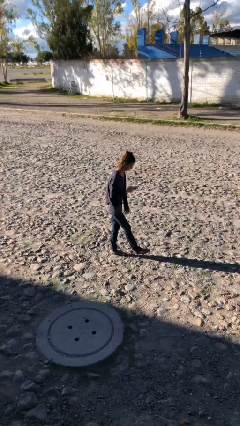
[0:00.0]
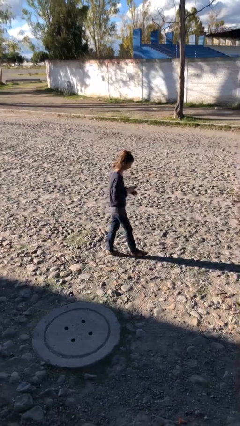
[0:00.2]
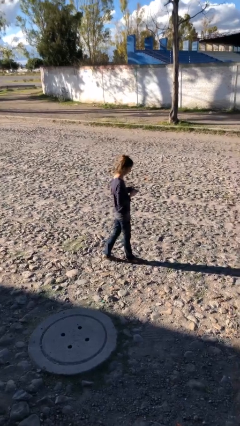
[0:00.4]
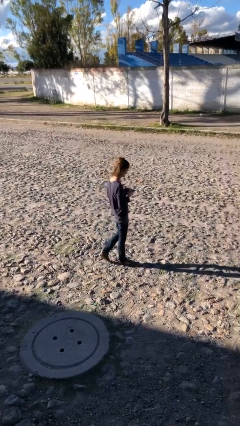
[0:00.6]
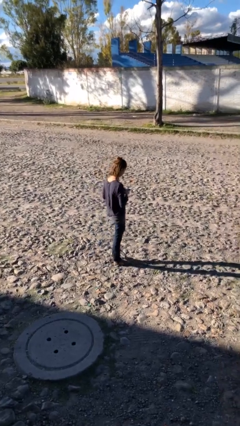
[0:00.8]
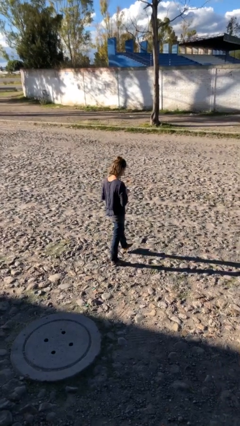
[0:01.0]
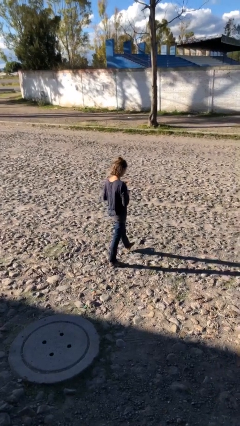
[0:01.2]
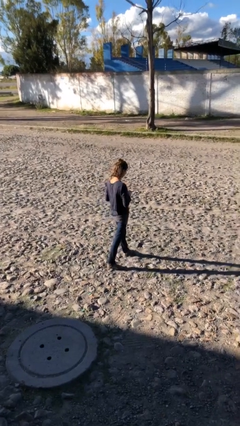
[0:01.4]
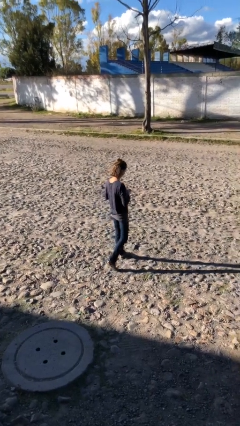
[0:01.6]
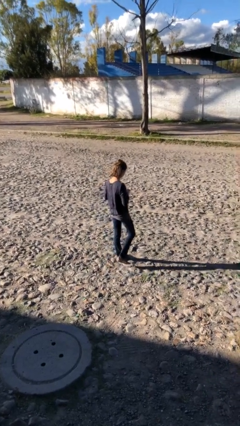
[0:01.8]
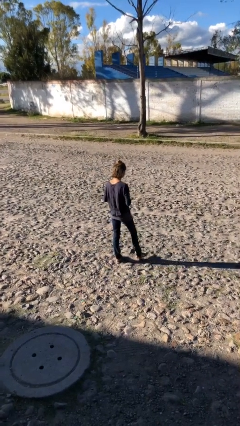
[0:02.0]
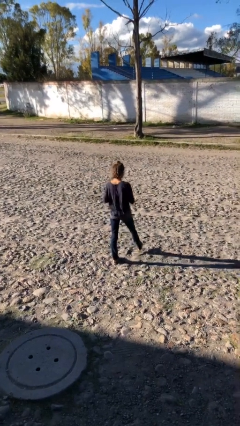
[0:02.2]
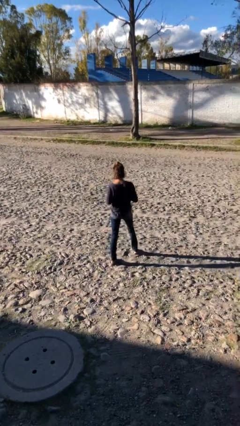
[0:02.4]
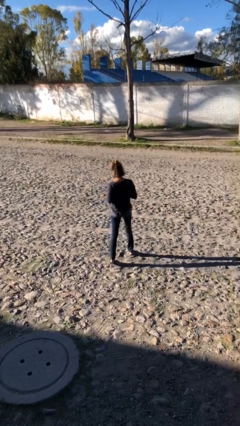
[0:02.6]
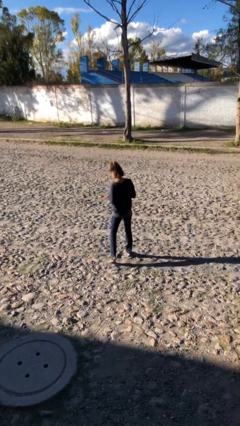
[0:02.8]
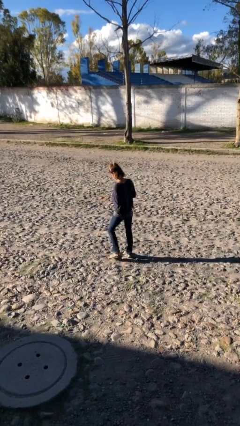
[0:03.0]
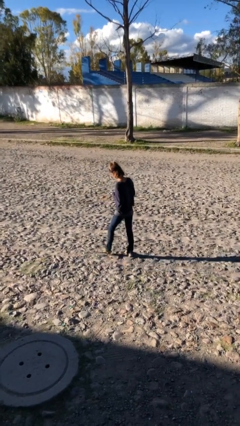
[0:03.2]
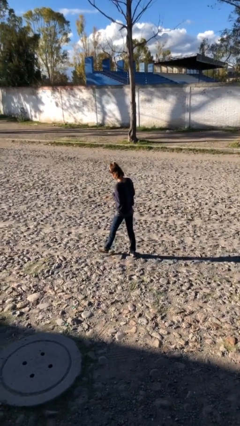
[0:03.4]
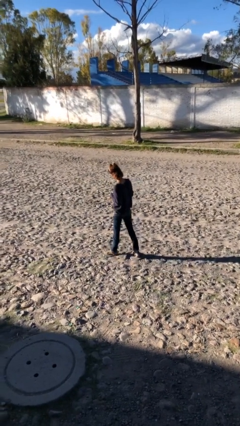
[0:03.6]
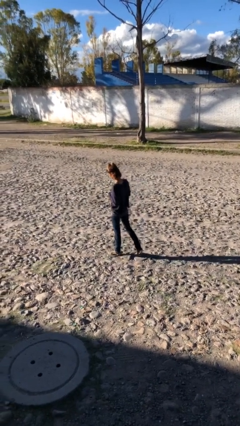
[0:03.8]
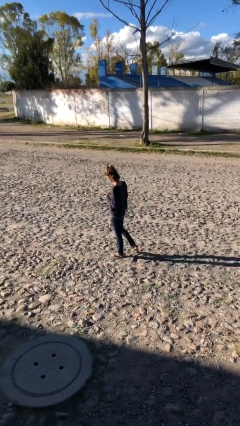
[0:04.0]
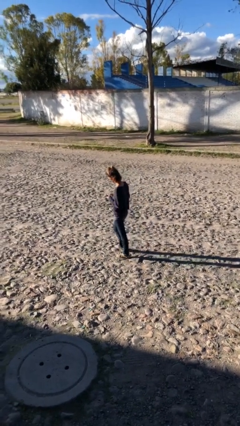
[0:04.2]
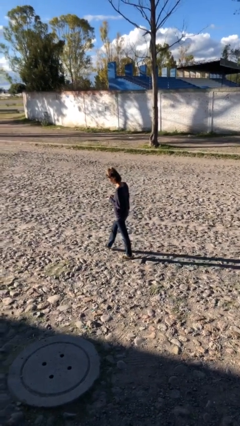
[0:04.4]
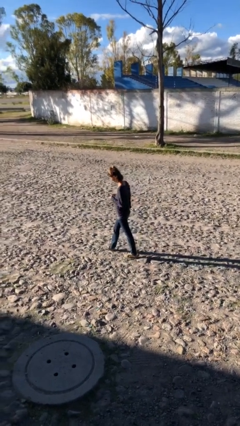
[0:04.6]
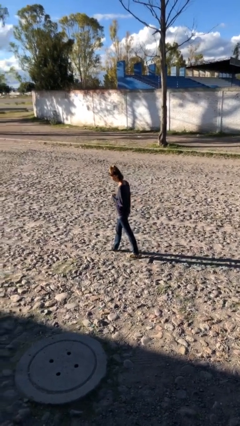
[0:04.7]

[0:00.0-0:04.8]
person texts on phone

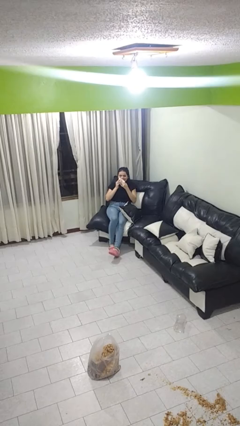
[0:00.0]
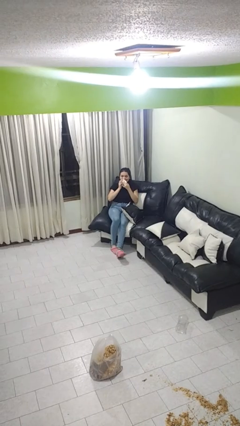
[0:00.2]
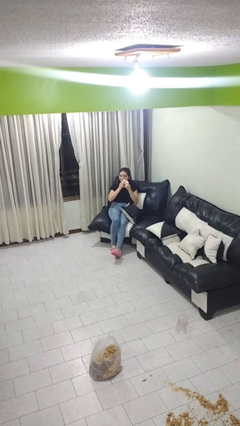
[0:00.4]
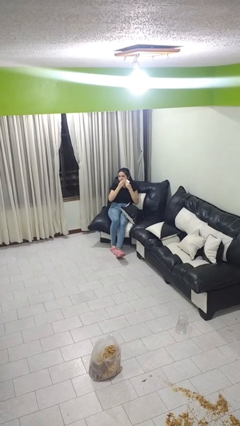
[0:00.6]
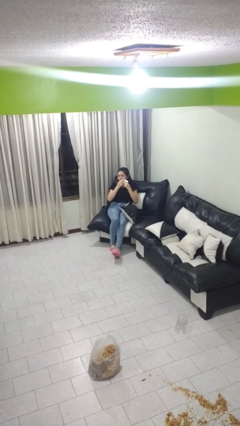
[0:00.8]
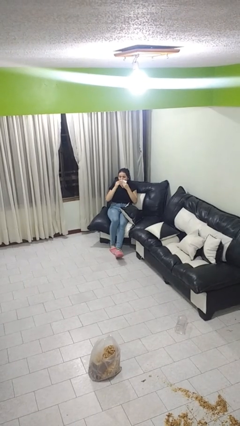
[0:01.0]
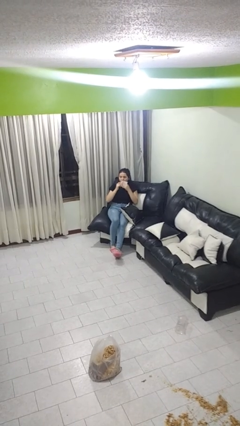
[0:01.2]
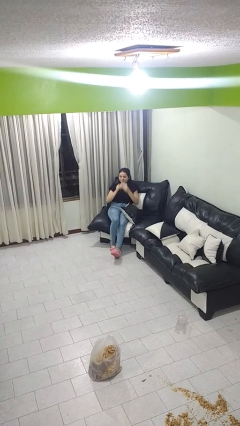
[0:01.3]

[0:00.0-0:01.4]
person wipes mouth with napkin

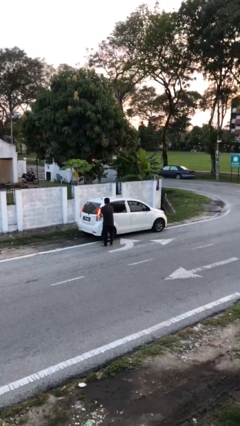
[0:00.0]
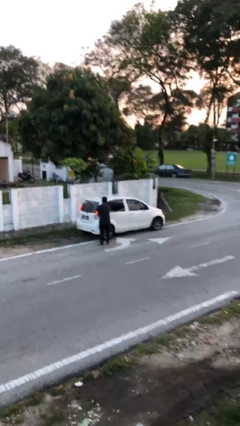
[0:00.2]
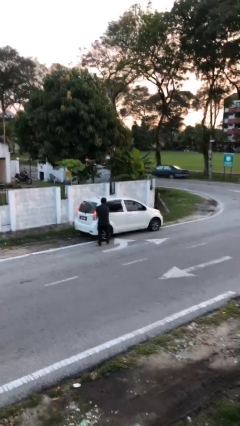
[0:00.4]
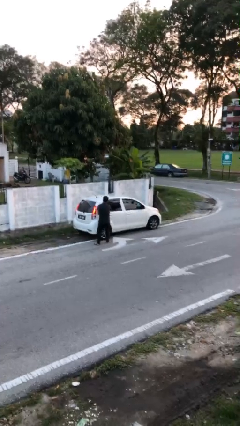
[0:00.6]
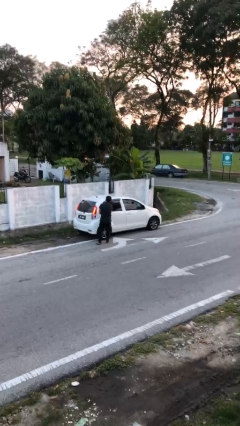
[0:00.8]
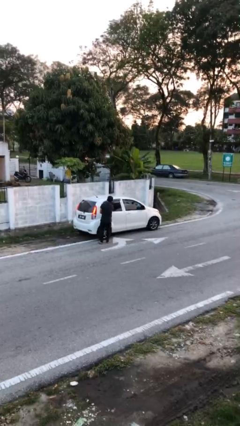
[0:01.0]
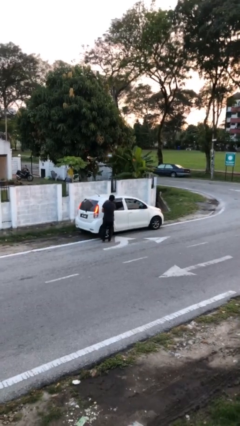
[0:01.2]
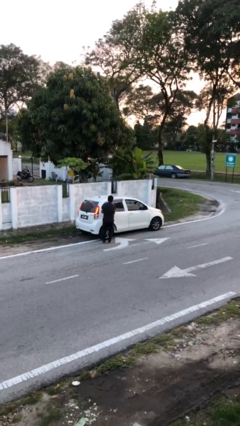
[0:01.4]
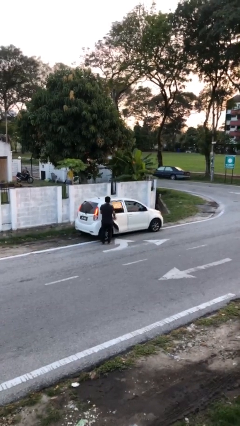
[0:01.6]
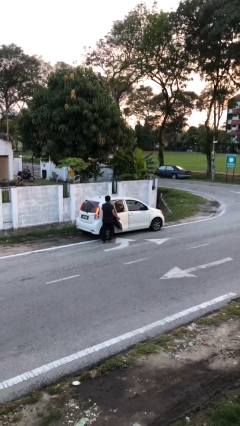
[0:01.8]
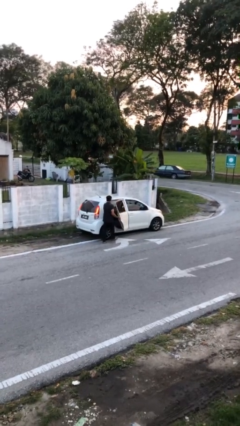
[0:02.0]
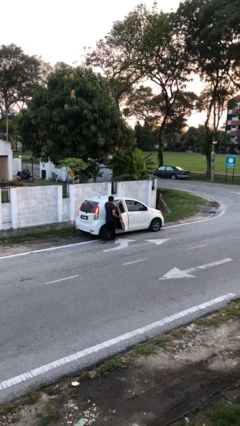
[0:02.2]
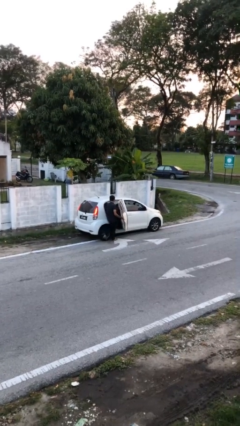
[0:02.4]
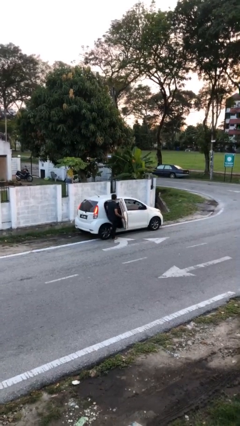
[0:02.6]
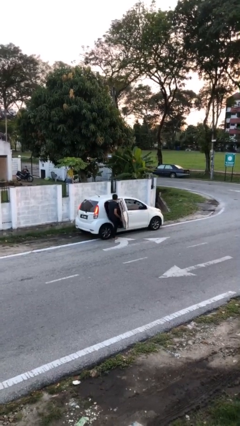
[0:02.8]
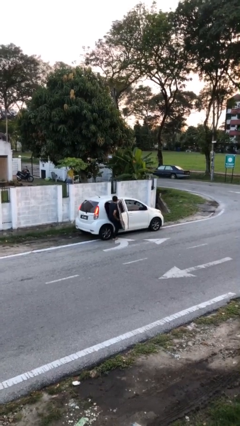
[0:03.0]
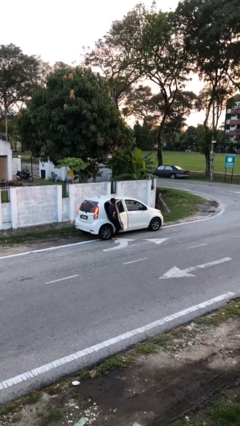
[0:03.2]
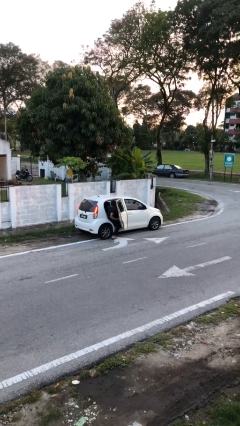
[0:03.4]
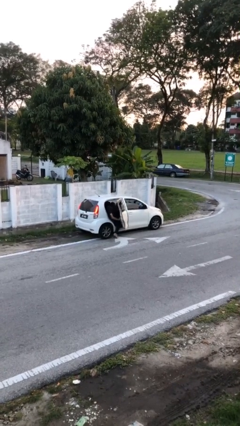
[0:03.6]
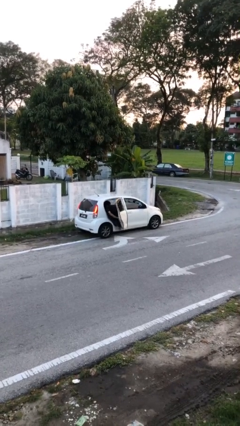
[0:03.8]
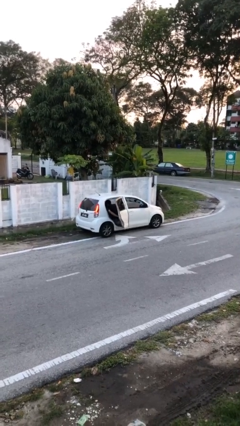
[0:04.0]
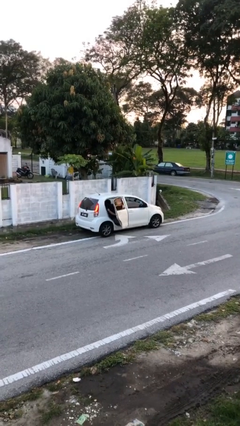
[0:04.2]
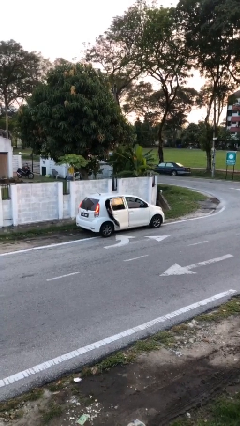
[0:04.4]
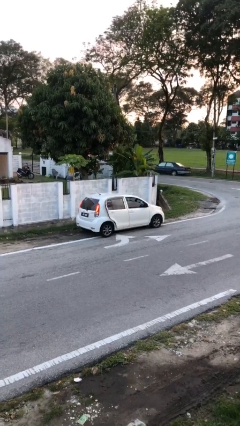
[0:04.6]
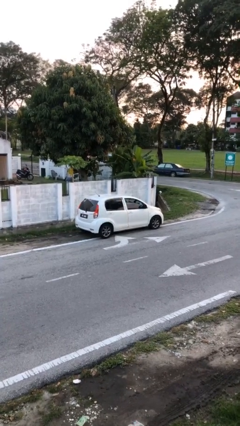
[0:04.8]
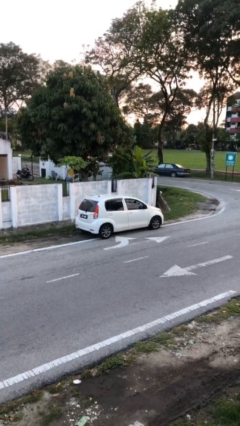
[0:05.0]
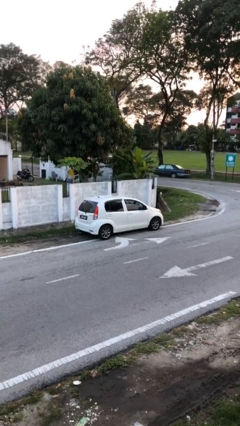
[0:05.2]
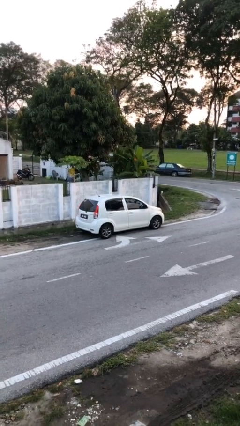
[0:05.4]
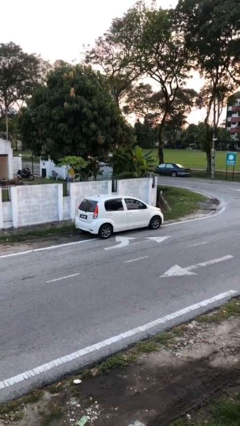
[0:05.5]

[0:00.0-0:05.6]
car picks up person

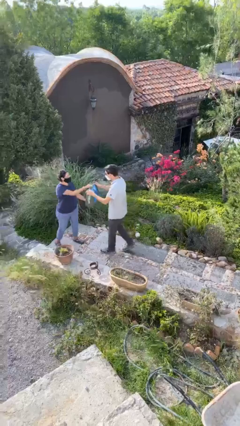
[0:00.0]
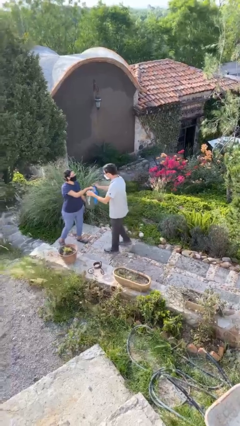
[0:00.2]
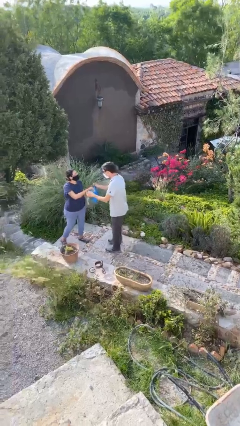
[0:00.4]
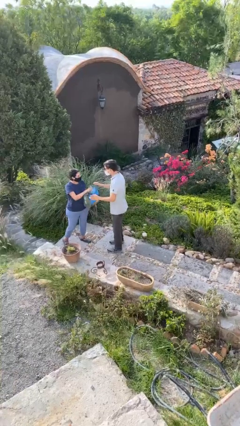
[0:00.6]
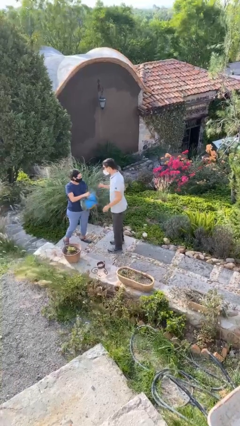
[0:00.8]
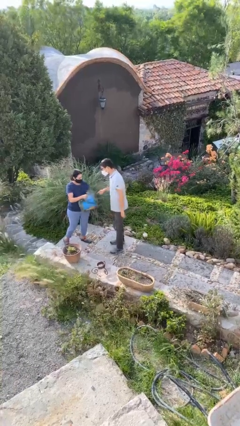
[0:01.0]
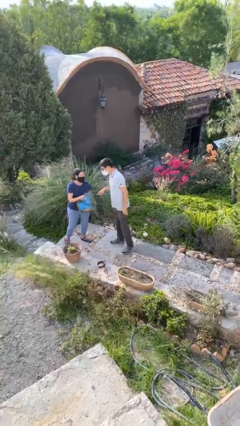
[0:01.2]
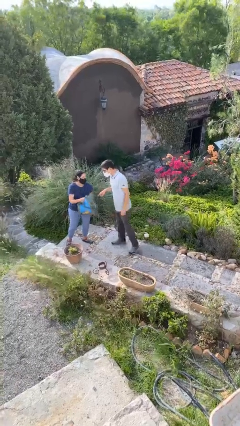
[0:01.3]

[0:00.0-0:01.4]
person transfers object to person

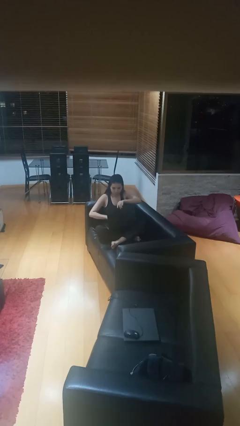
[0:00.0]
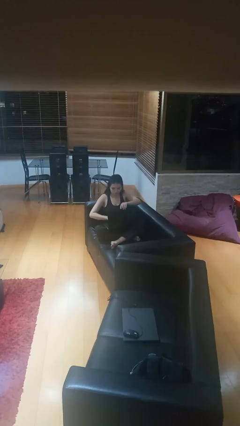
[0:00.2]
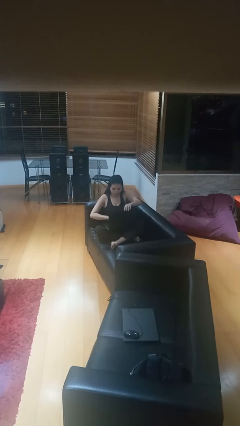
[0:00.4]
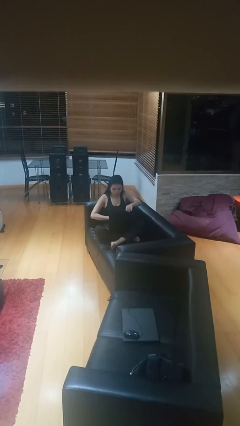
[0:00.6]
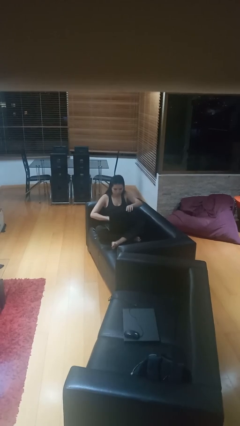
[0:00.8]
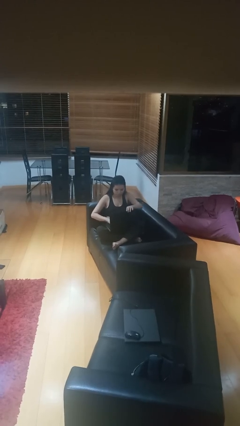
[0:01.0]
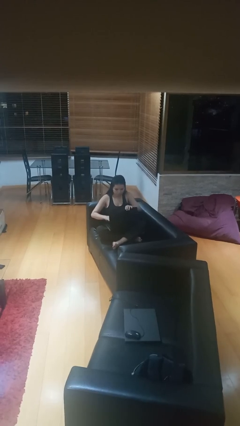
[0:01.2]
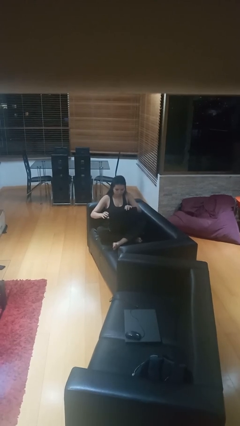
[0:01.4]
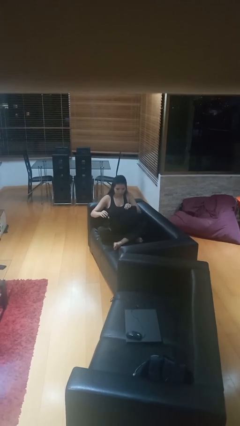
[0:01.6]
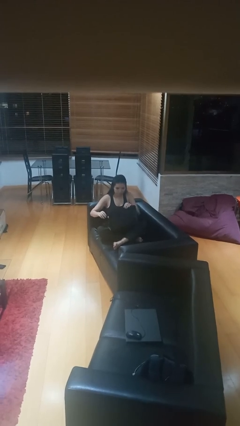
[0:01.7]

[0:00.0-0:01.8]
person interacts with laptop

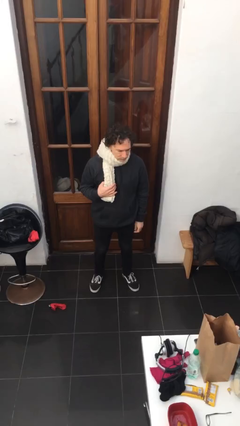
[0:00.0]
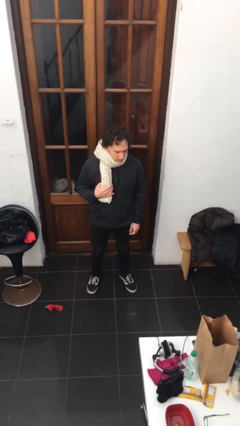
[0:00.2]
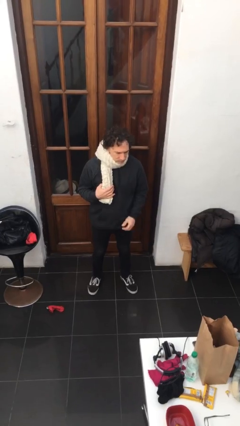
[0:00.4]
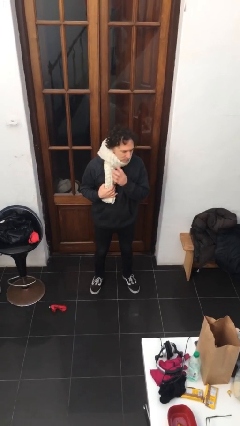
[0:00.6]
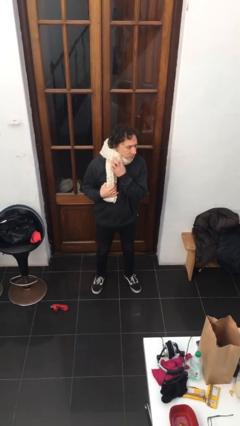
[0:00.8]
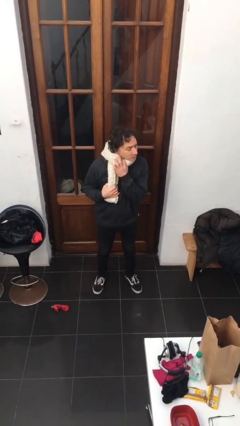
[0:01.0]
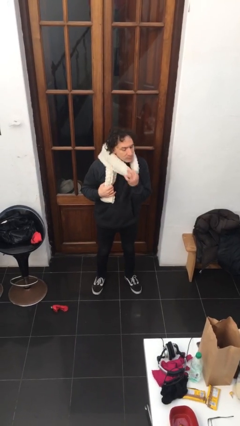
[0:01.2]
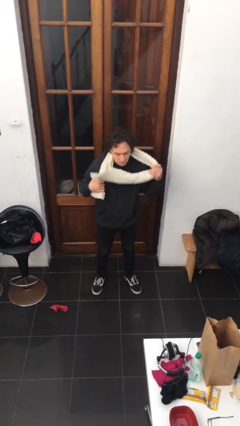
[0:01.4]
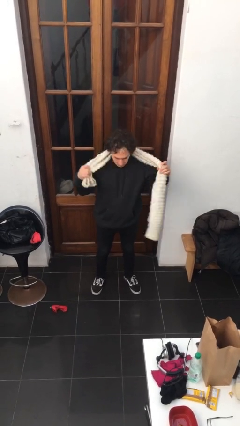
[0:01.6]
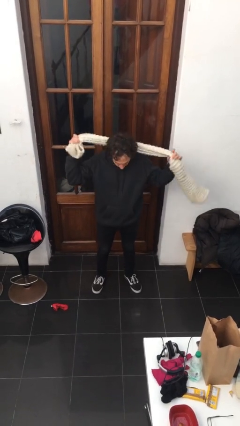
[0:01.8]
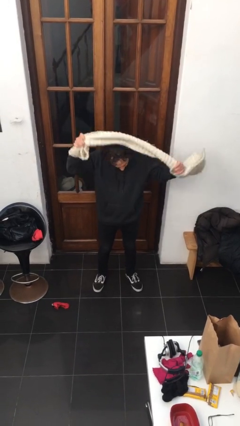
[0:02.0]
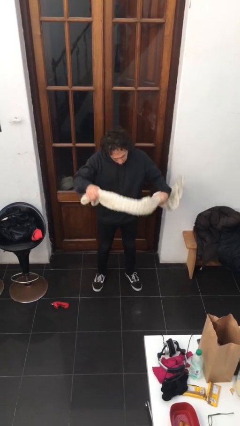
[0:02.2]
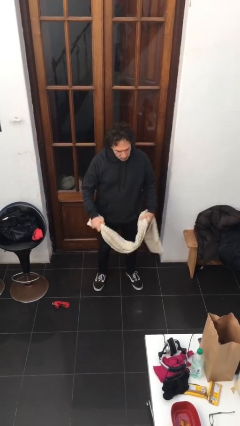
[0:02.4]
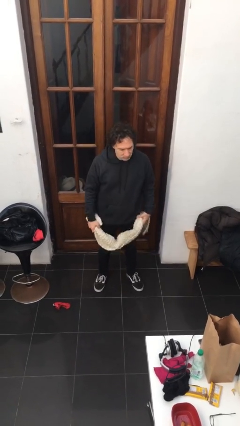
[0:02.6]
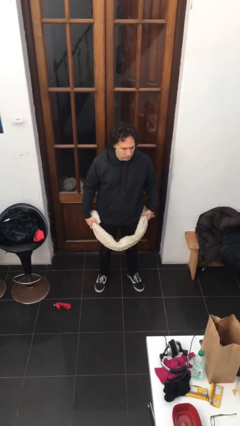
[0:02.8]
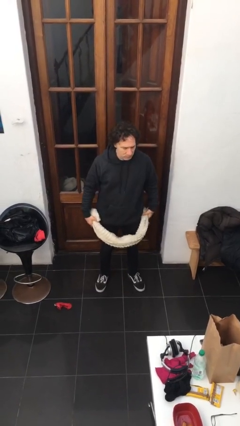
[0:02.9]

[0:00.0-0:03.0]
person takes off scarf
